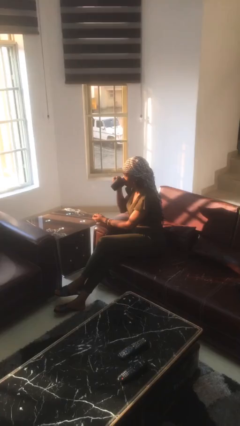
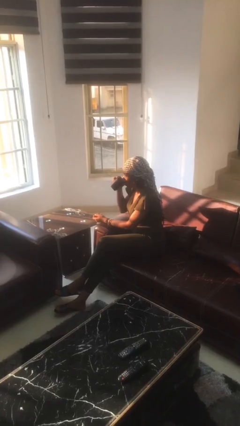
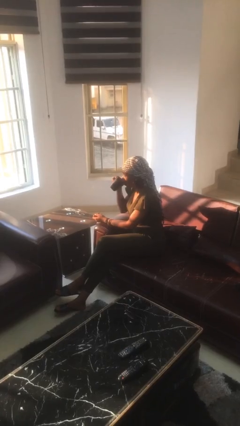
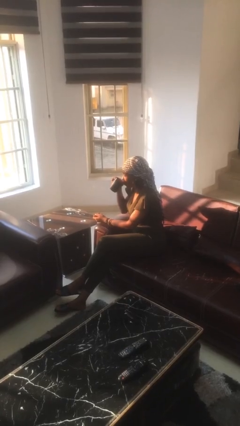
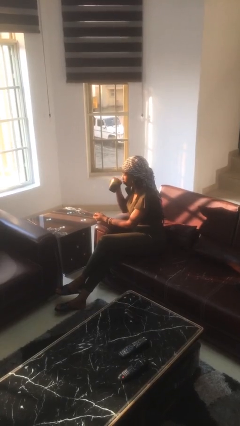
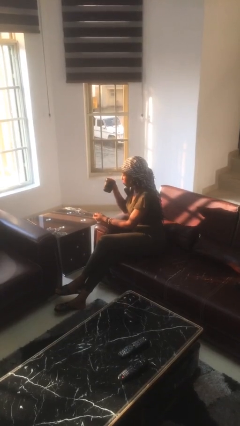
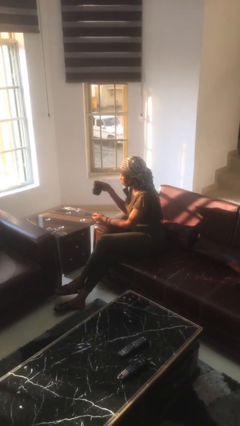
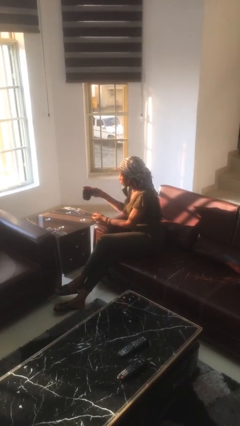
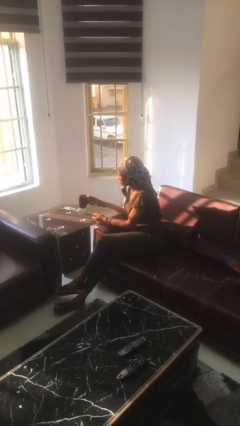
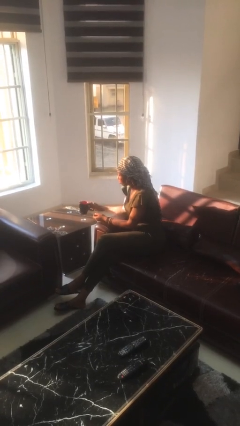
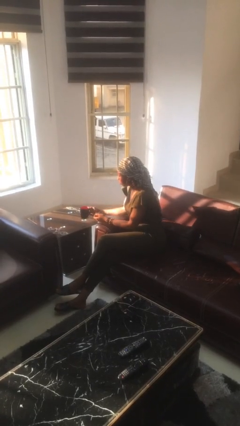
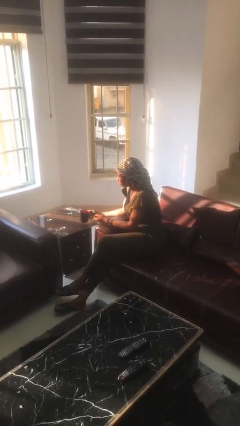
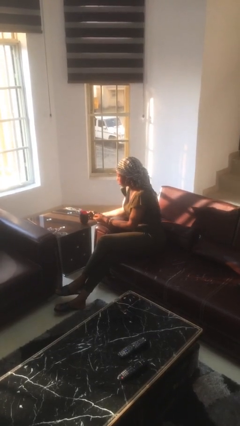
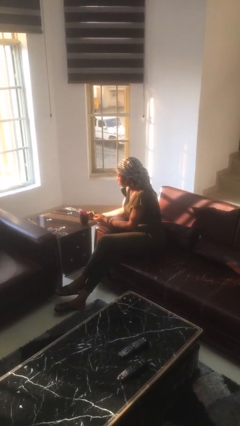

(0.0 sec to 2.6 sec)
person puts down object on table

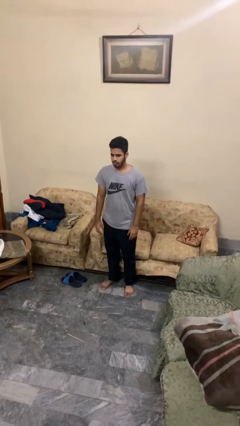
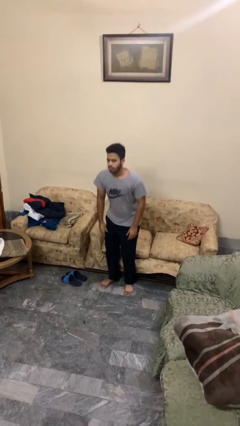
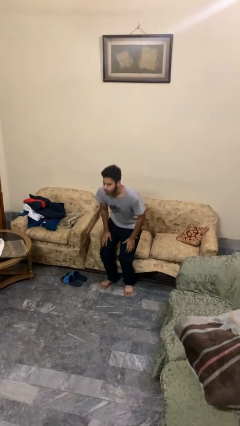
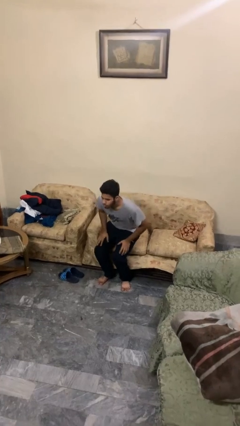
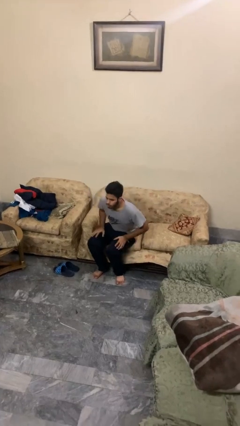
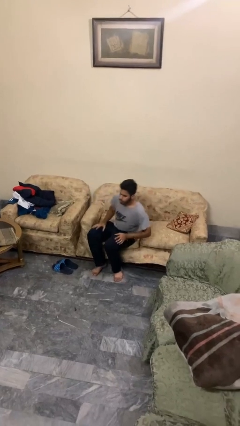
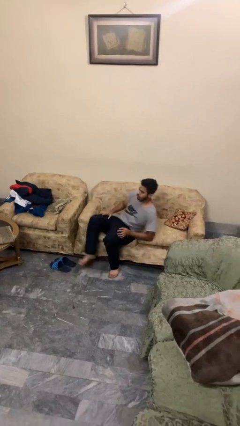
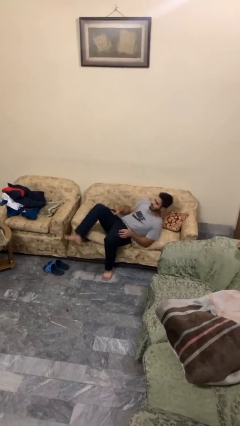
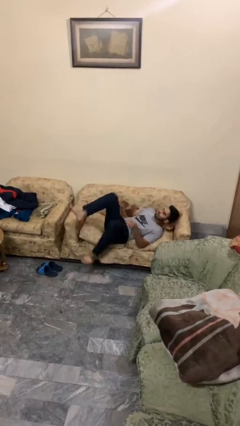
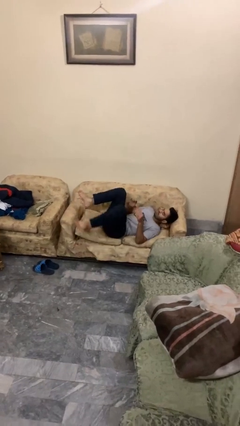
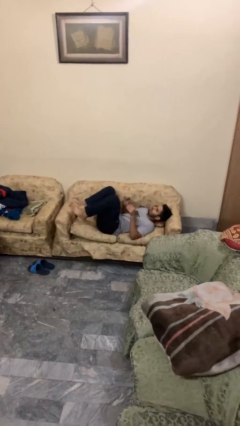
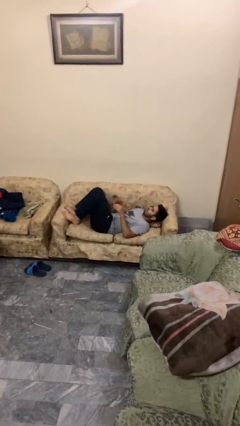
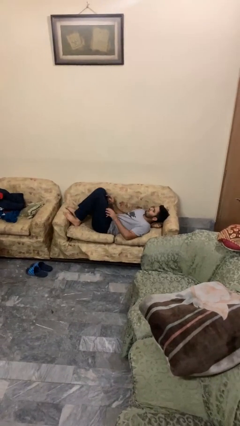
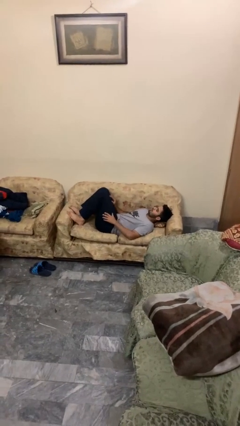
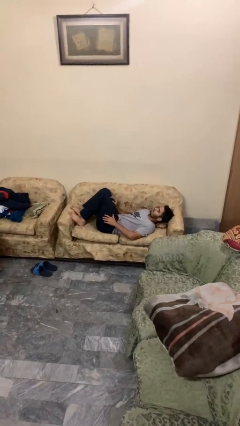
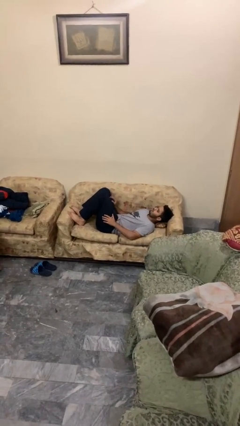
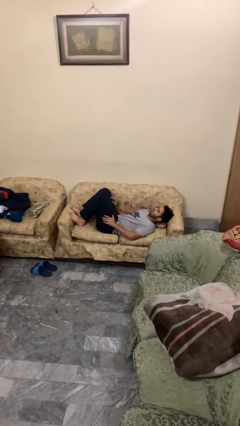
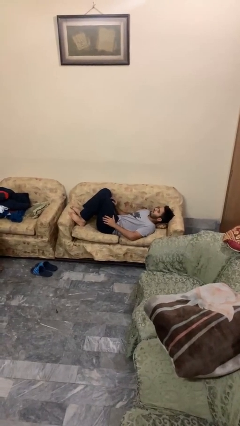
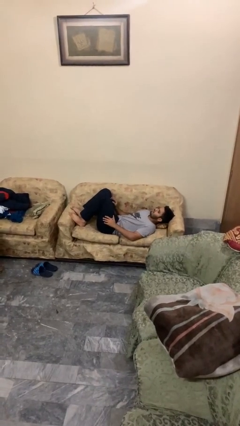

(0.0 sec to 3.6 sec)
person lies down on couch

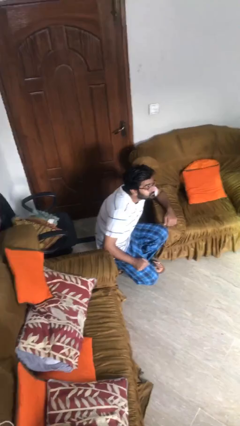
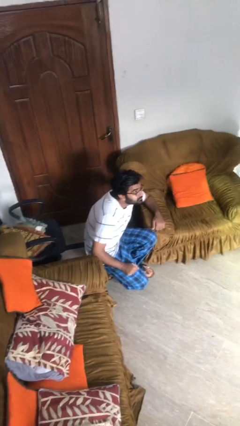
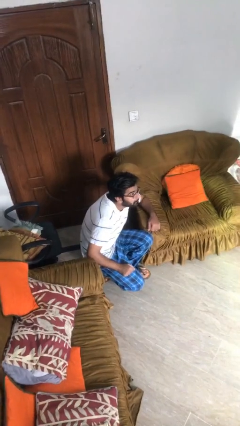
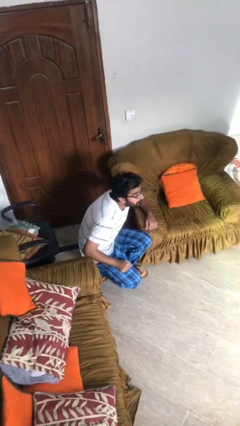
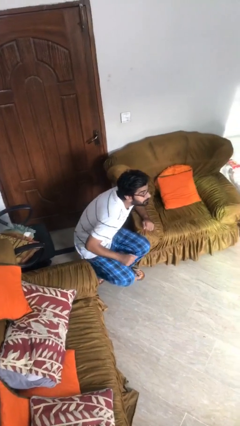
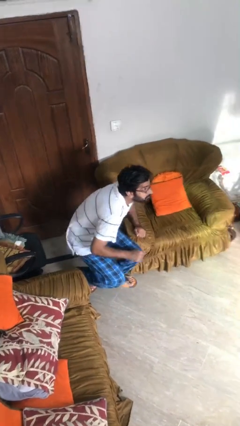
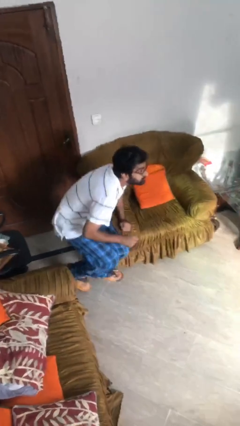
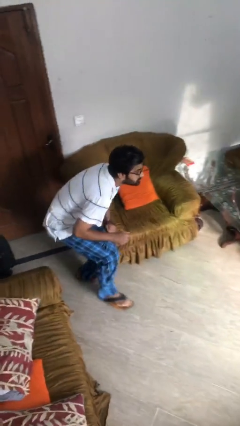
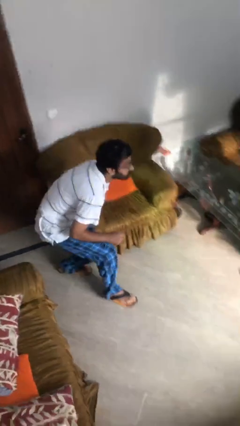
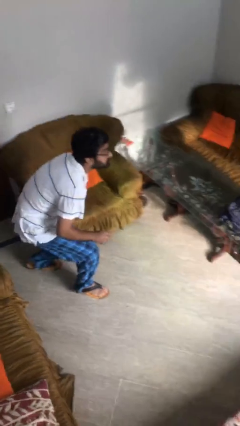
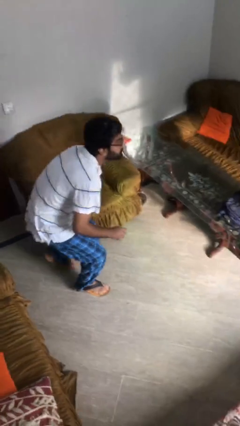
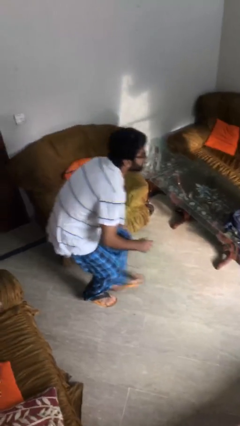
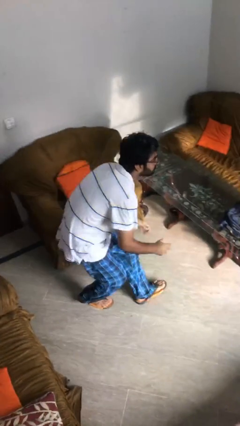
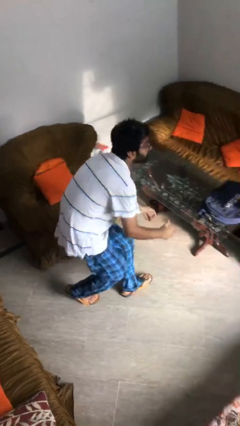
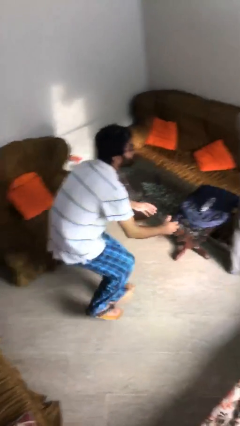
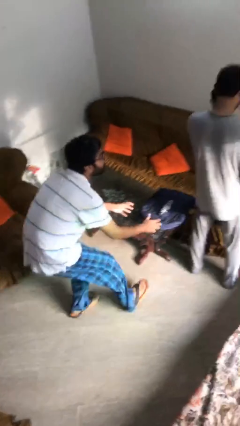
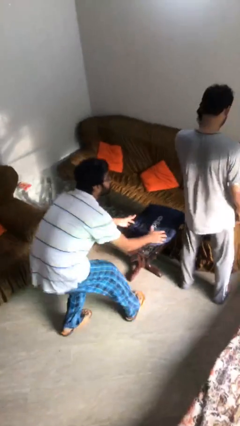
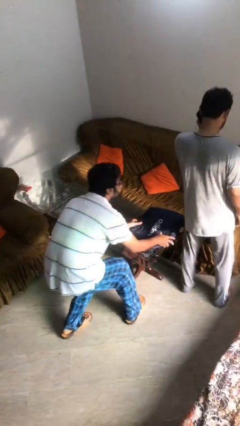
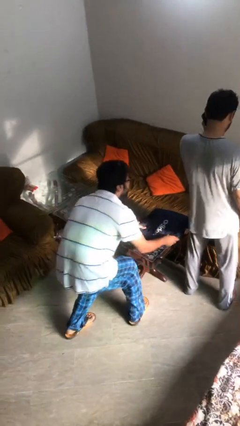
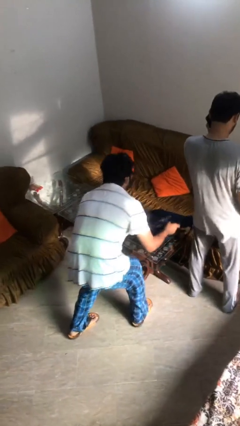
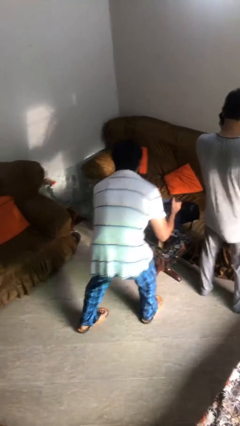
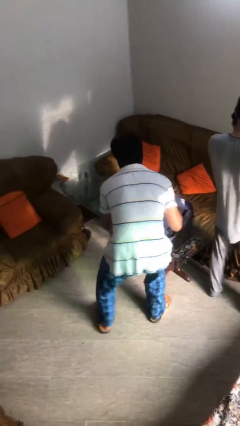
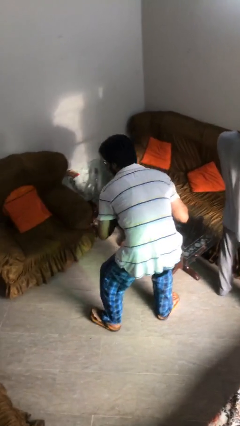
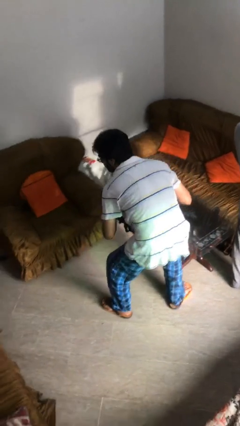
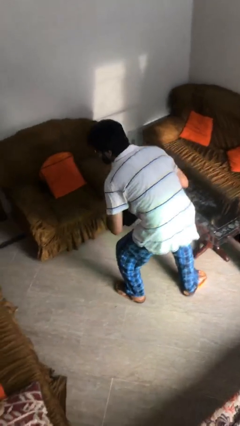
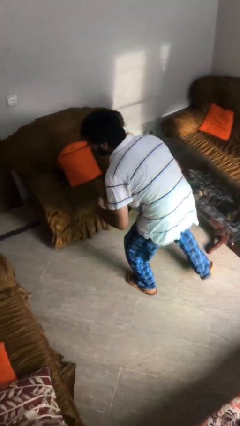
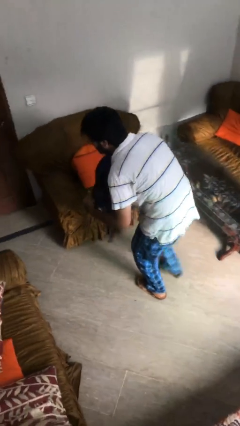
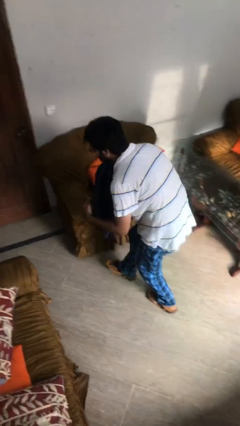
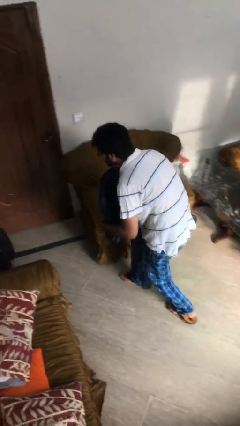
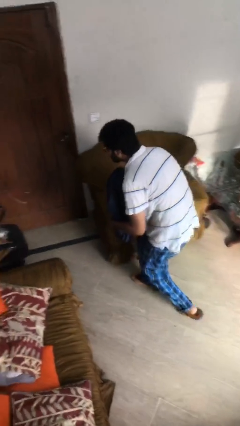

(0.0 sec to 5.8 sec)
person steals object from person

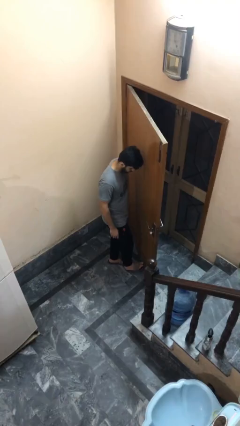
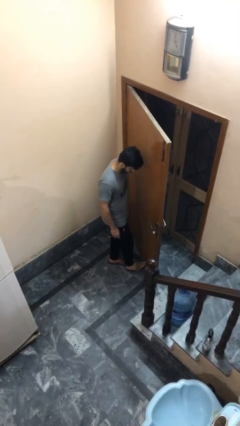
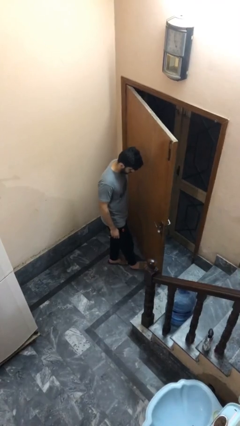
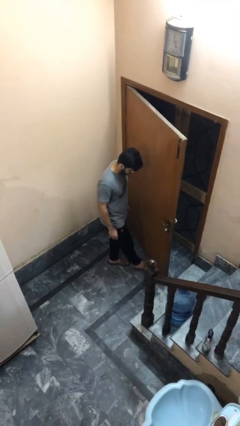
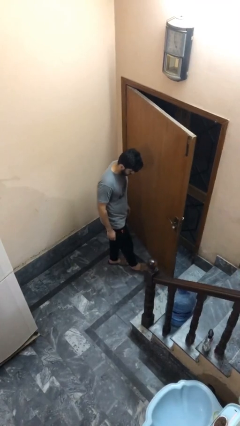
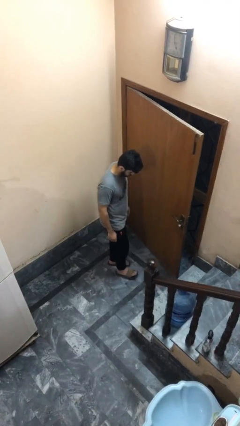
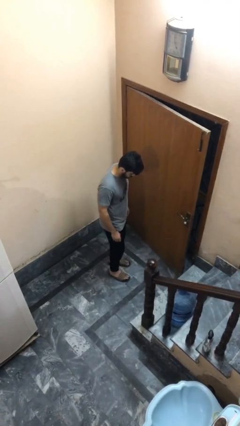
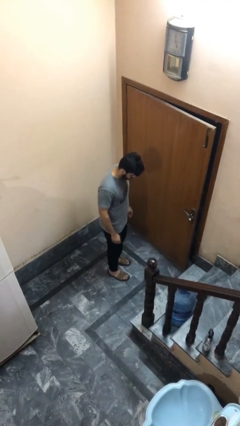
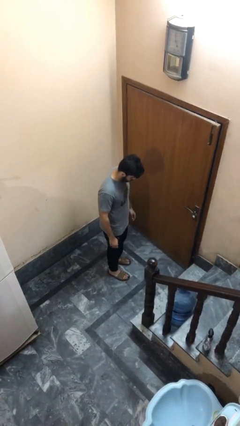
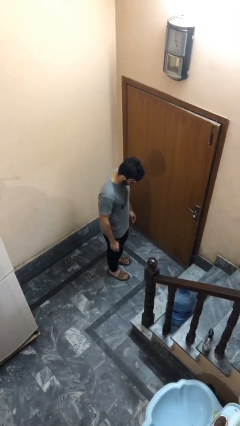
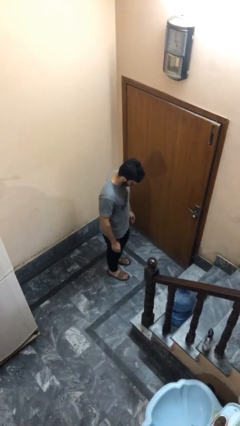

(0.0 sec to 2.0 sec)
person closes door with foot

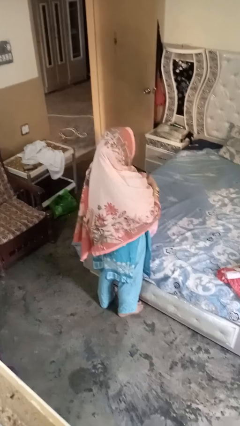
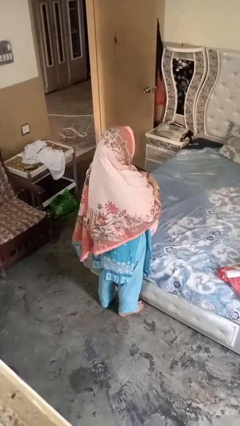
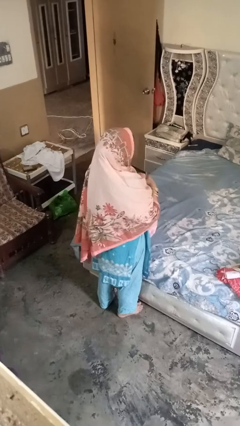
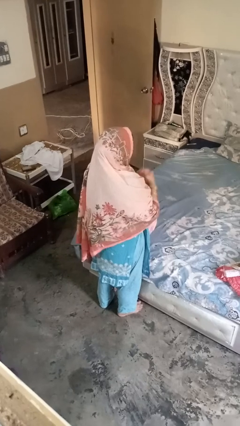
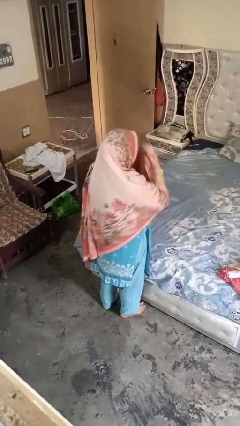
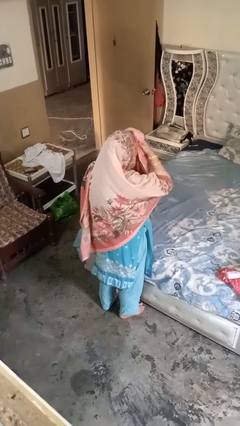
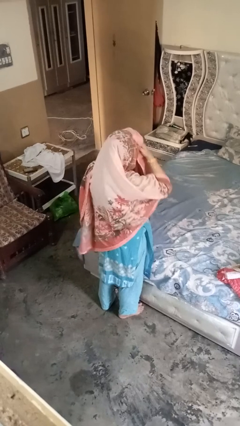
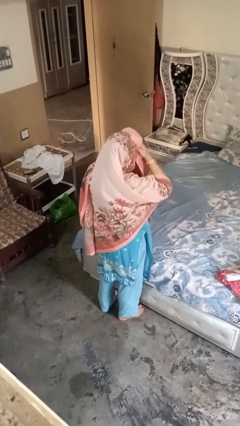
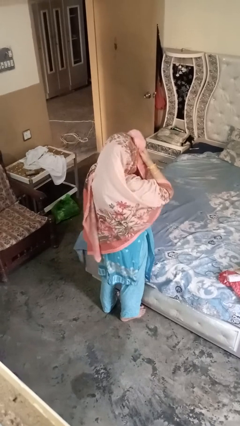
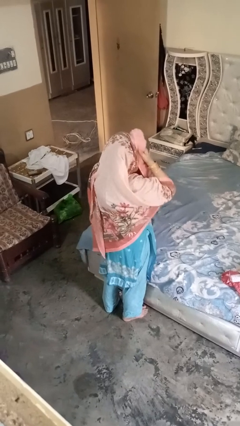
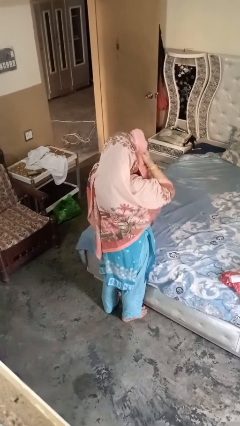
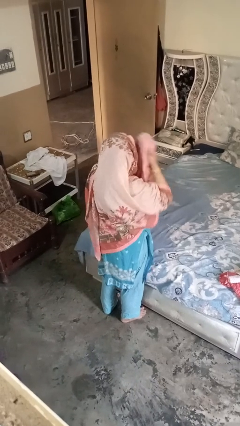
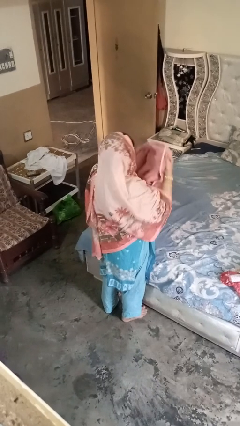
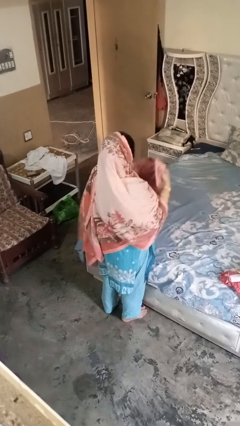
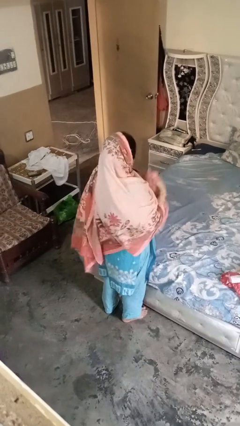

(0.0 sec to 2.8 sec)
person dries hair with towel

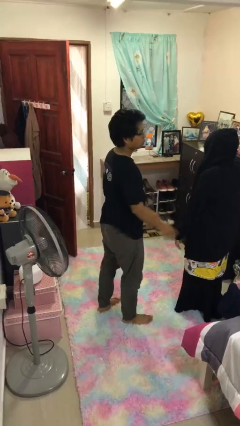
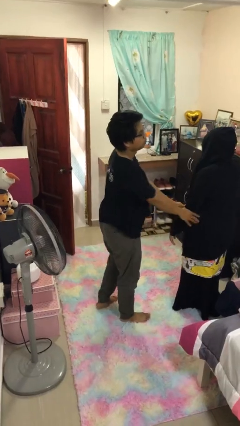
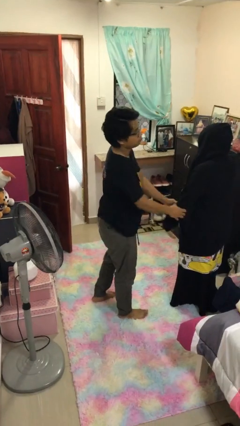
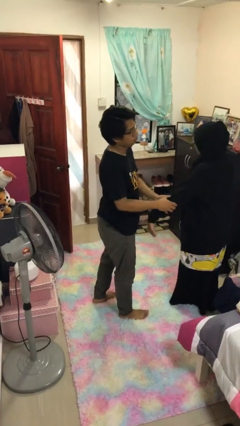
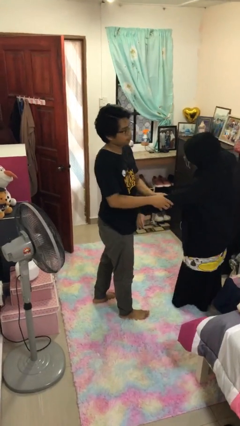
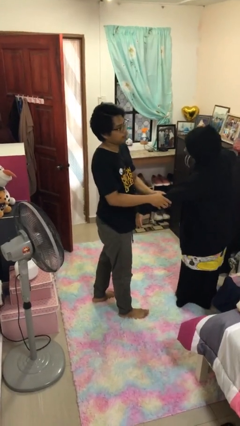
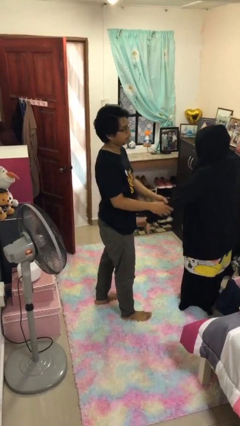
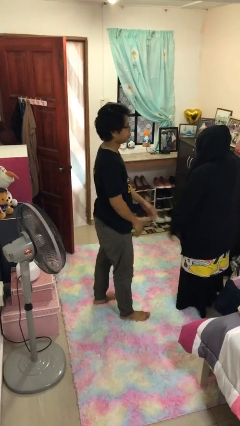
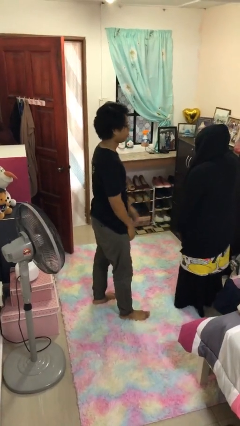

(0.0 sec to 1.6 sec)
person grabs person by forearm
